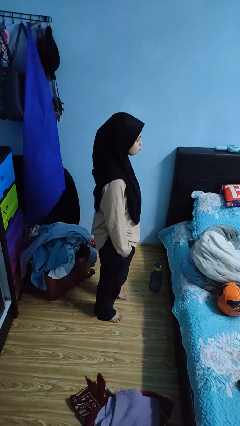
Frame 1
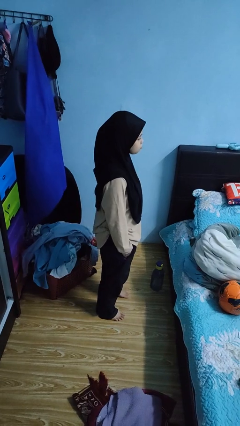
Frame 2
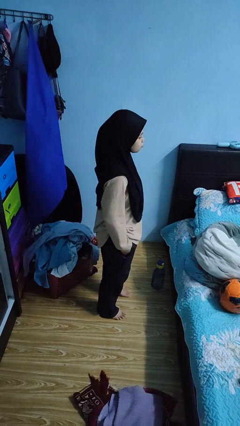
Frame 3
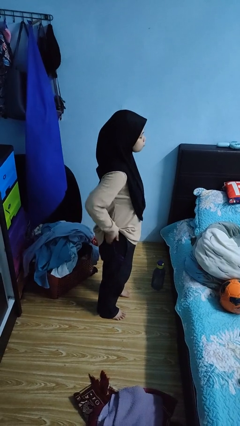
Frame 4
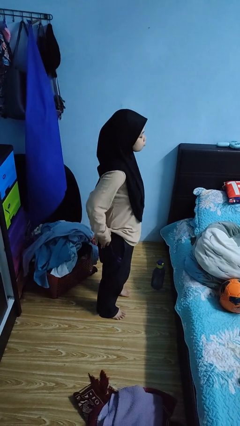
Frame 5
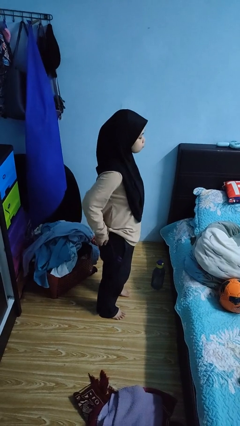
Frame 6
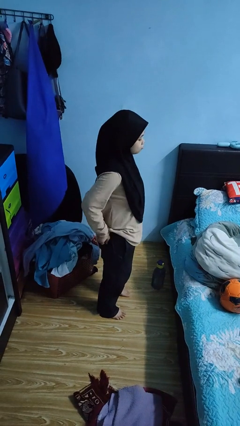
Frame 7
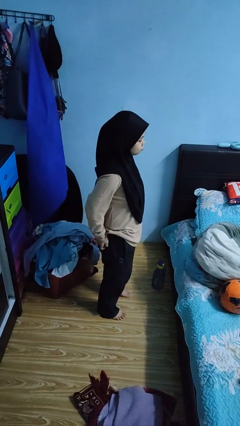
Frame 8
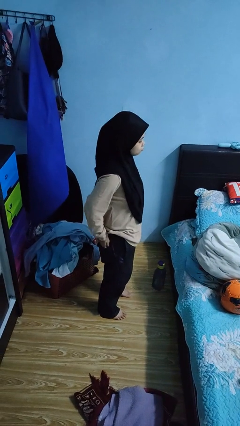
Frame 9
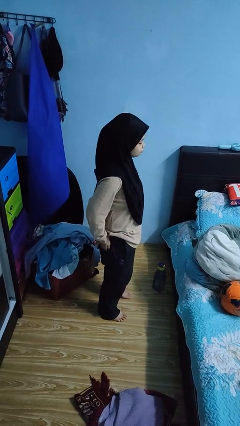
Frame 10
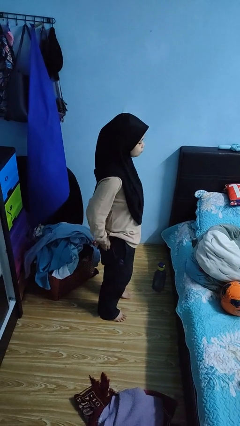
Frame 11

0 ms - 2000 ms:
person puts hands in back pockets

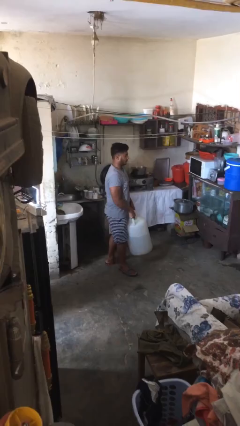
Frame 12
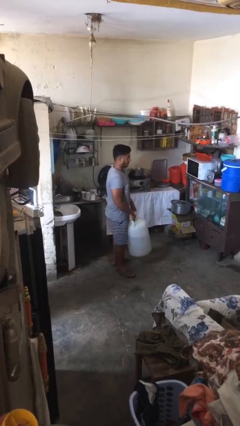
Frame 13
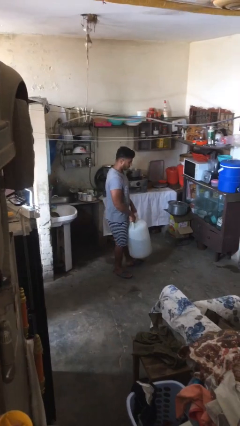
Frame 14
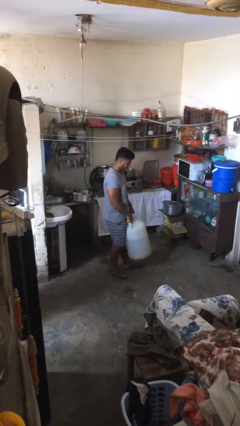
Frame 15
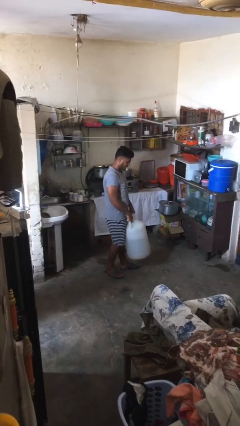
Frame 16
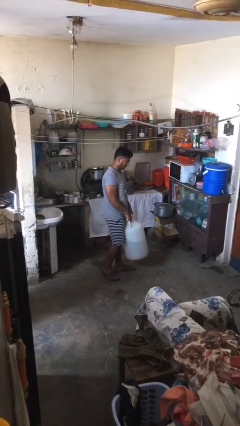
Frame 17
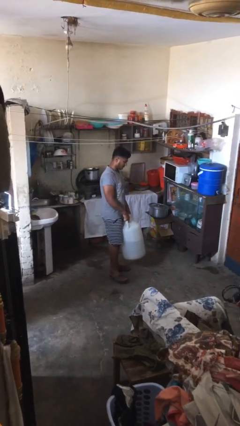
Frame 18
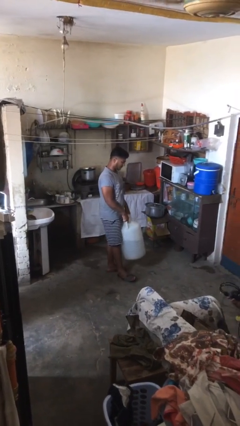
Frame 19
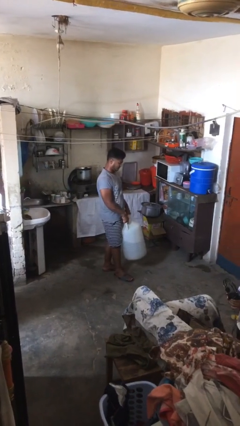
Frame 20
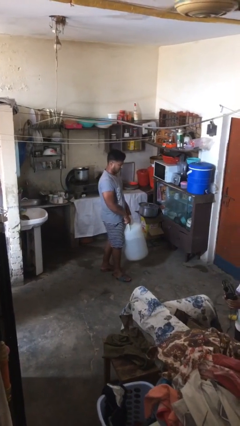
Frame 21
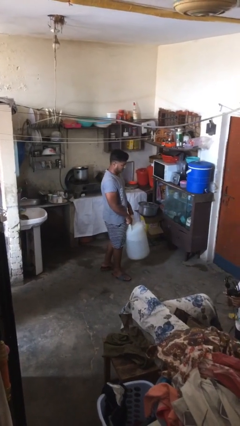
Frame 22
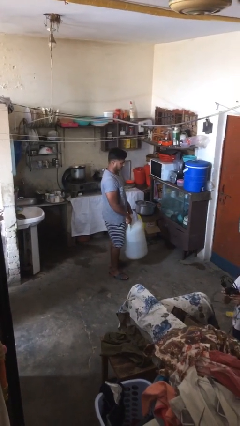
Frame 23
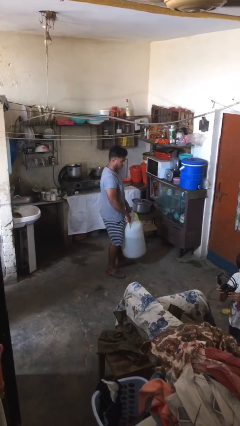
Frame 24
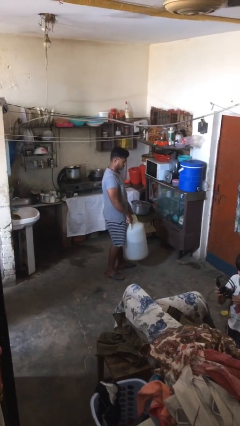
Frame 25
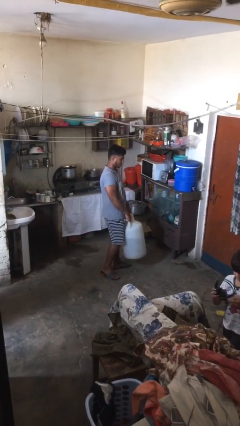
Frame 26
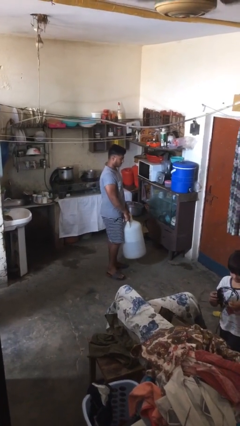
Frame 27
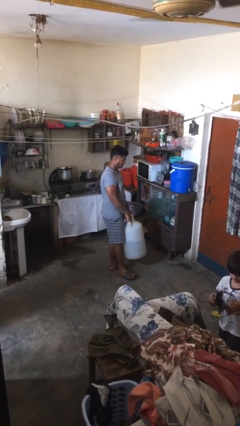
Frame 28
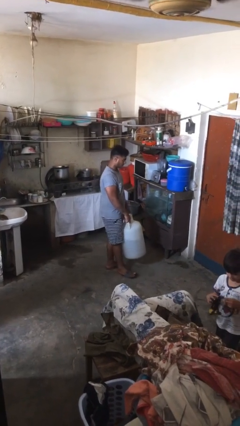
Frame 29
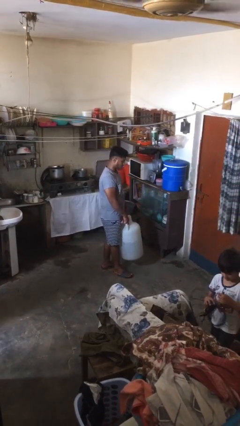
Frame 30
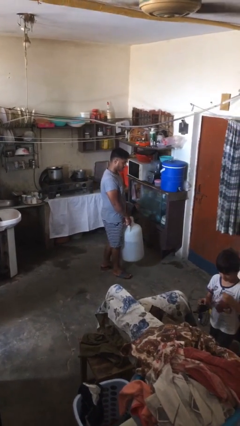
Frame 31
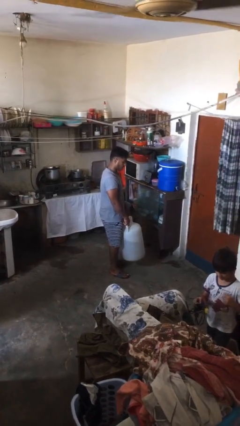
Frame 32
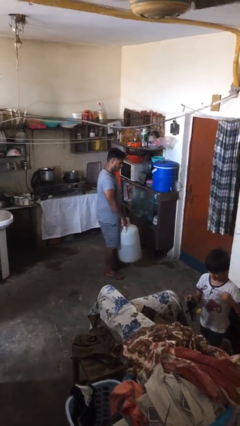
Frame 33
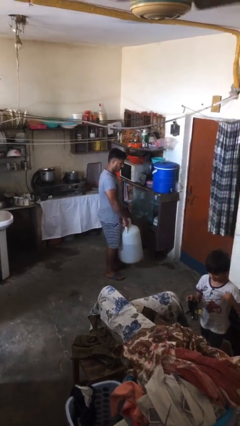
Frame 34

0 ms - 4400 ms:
person carries heavy object

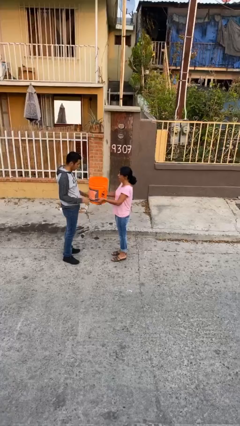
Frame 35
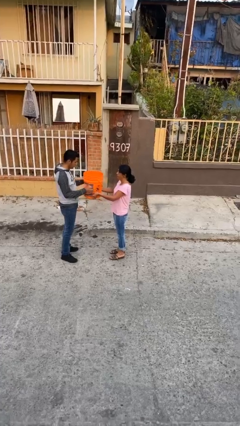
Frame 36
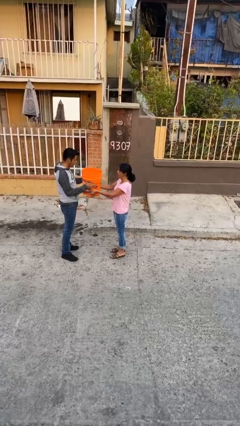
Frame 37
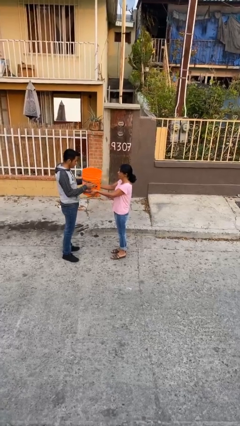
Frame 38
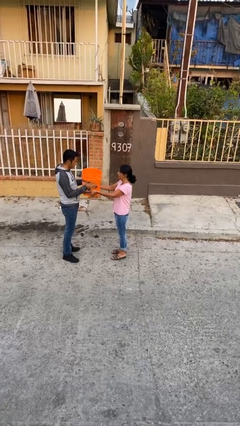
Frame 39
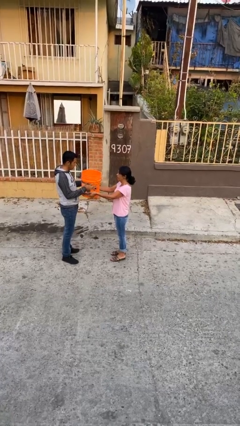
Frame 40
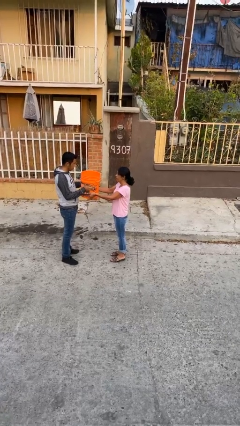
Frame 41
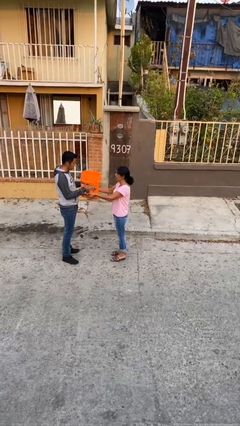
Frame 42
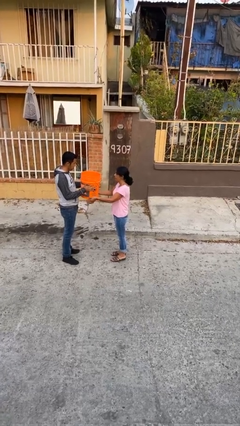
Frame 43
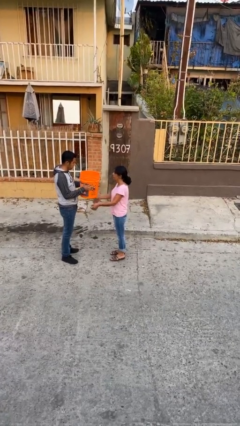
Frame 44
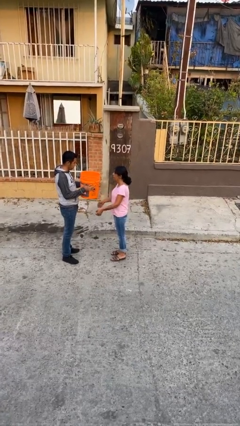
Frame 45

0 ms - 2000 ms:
person transfers object to person

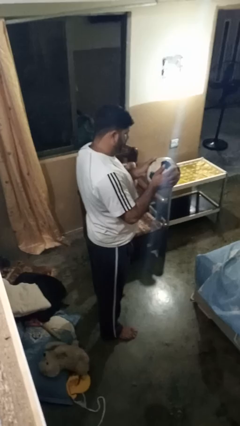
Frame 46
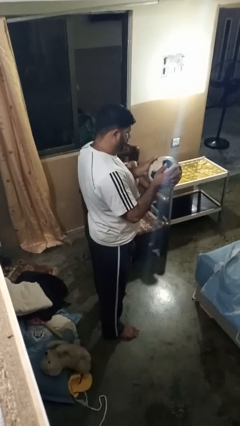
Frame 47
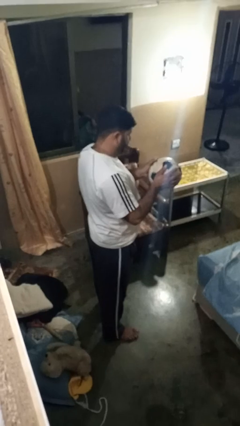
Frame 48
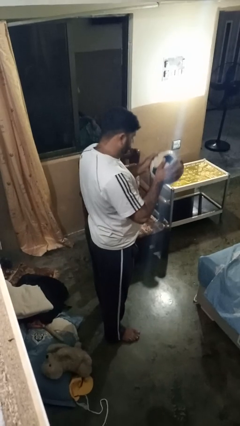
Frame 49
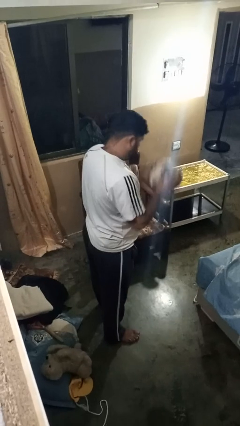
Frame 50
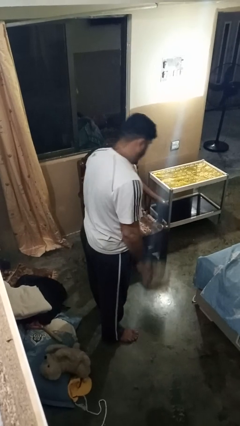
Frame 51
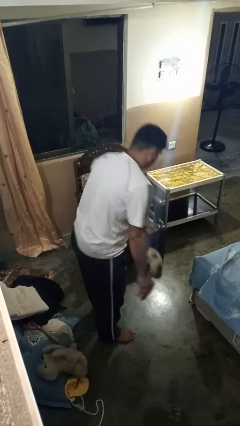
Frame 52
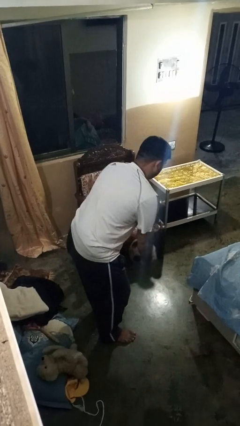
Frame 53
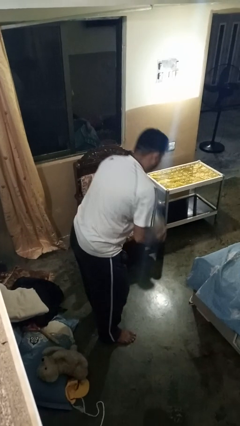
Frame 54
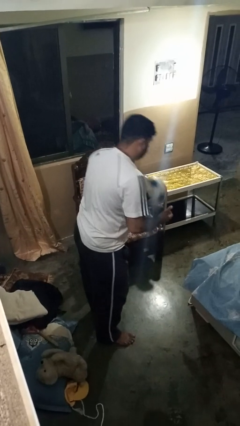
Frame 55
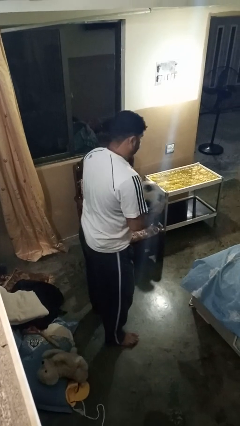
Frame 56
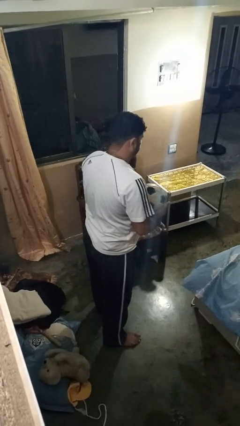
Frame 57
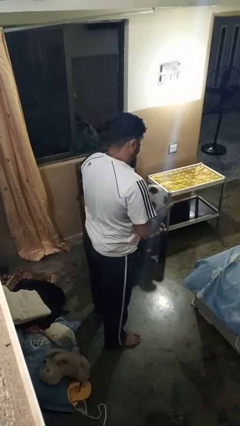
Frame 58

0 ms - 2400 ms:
person bounces ball on floor

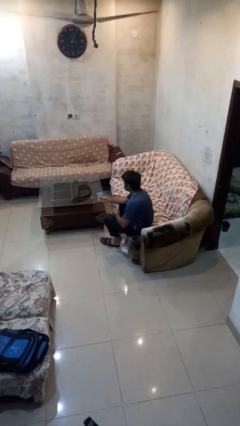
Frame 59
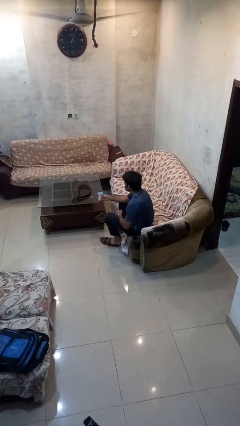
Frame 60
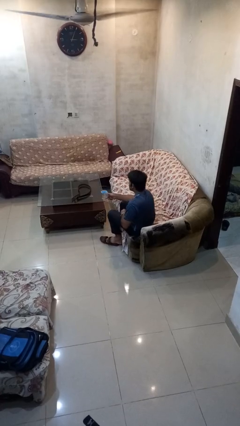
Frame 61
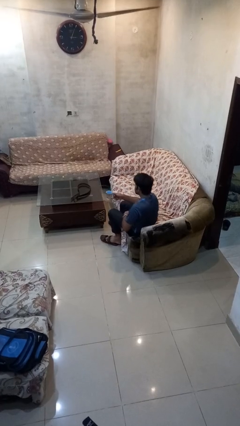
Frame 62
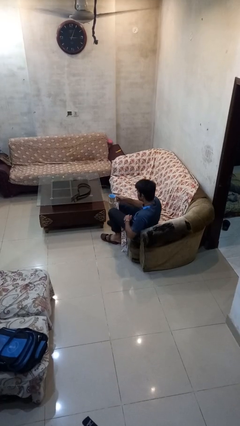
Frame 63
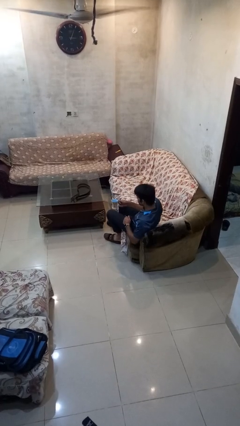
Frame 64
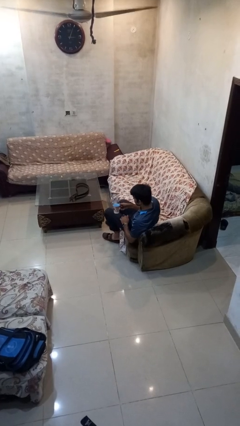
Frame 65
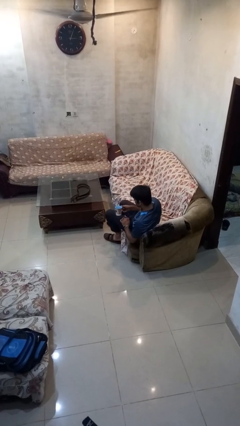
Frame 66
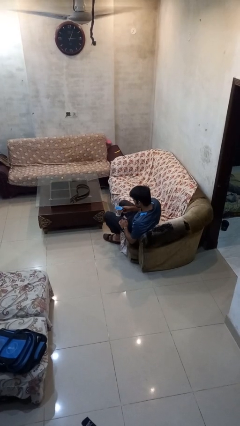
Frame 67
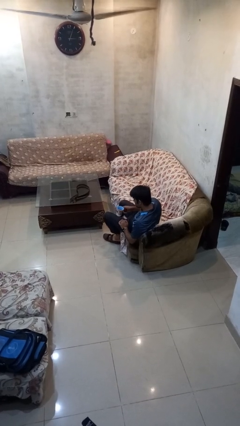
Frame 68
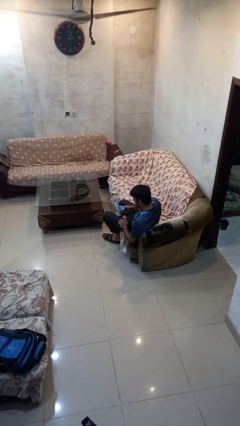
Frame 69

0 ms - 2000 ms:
person picks up object from table

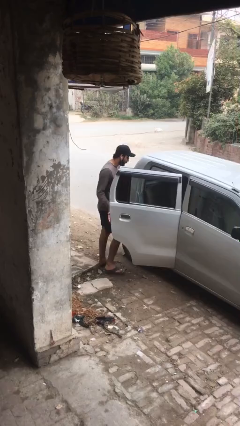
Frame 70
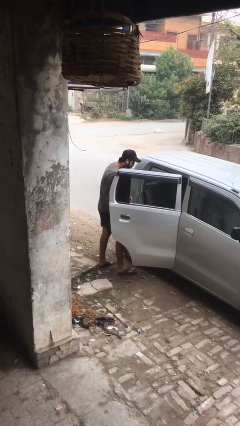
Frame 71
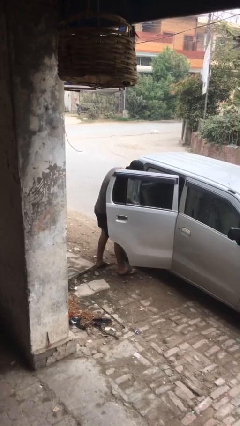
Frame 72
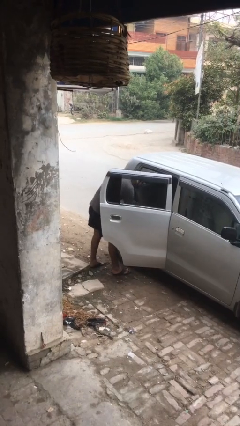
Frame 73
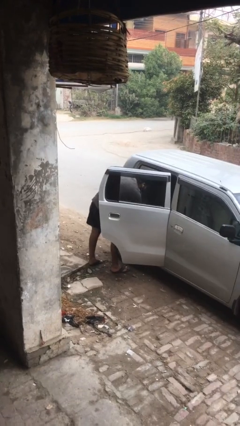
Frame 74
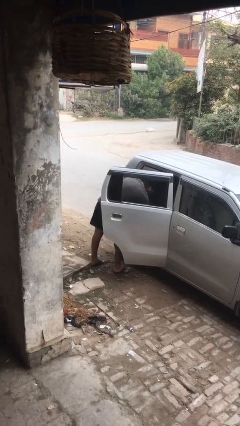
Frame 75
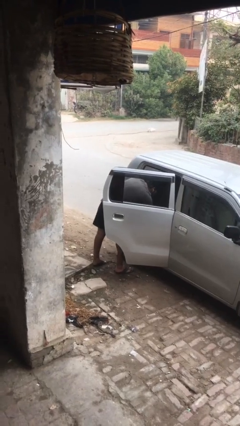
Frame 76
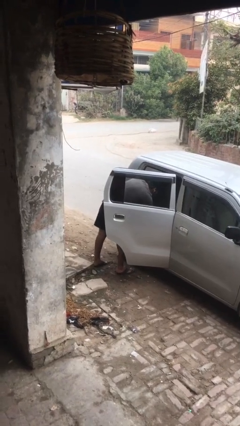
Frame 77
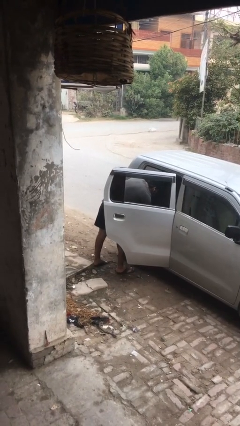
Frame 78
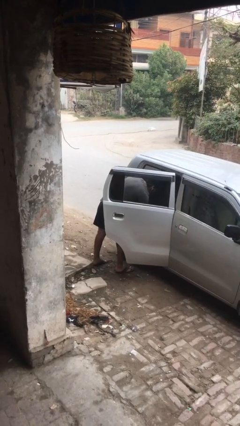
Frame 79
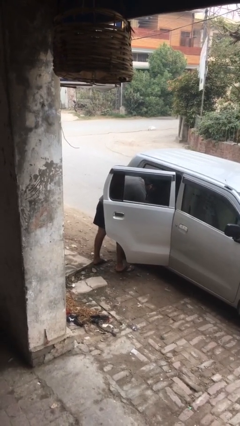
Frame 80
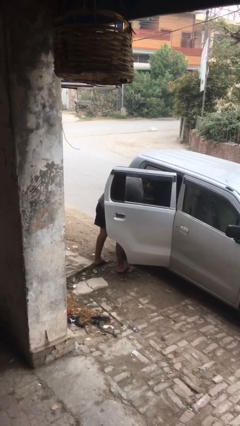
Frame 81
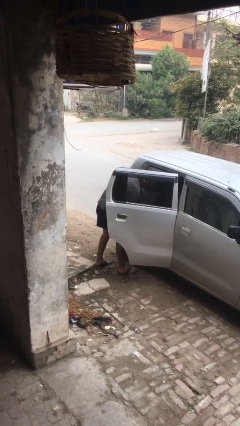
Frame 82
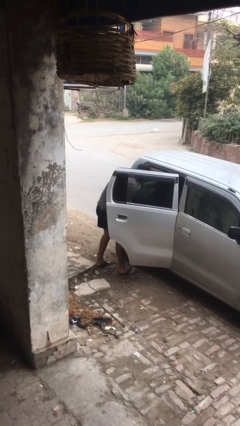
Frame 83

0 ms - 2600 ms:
person unloads car

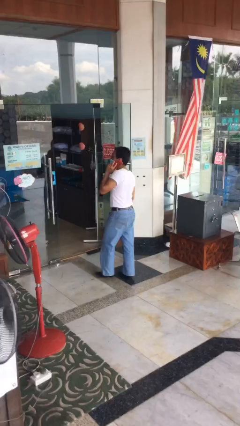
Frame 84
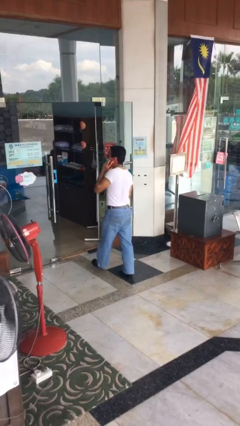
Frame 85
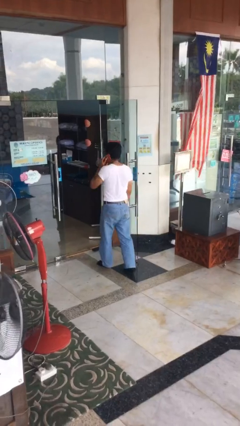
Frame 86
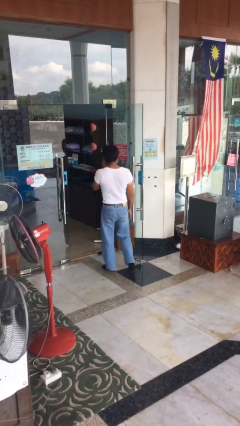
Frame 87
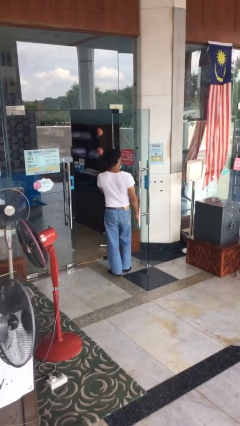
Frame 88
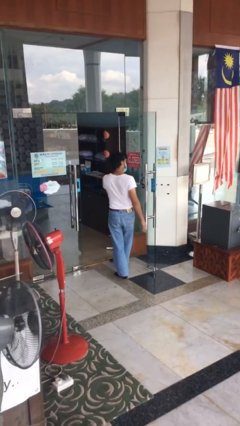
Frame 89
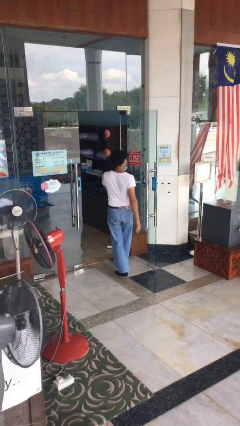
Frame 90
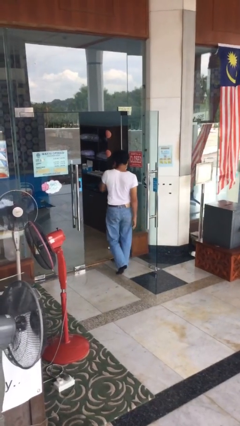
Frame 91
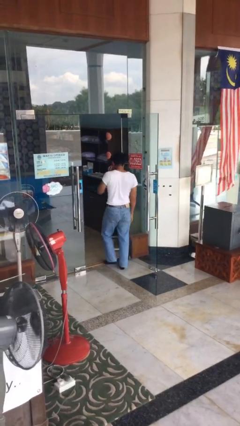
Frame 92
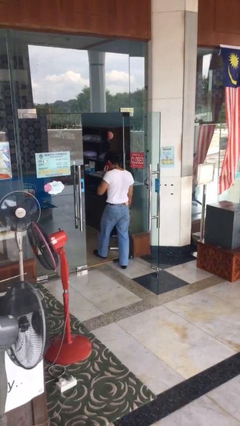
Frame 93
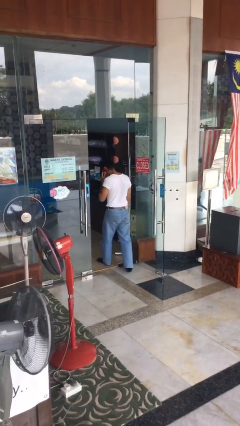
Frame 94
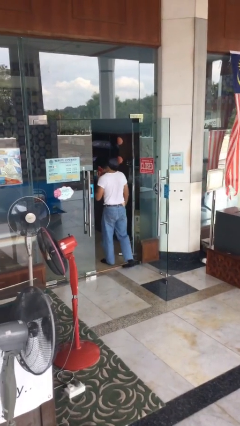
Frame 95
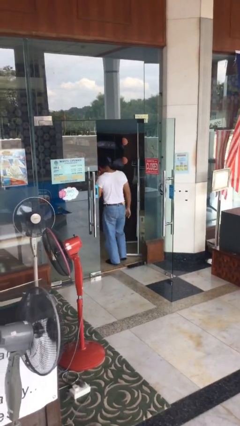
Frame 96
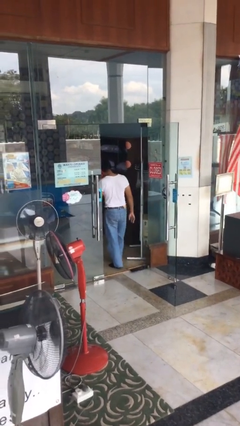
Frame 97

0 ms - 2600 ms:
person exits scene through structure
